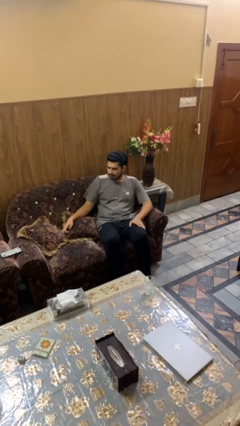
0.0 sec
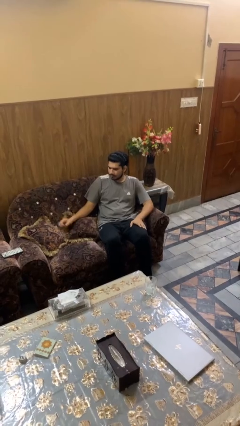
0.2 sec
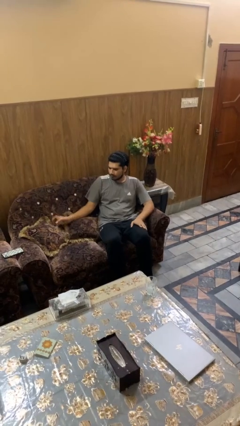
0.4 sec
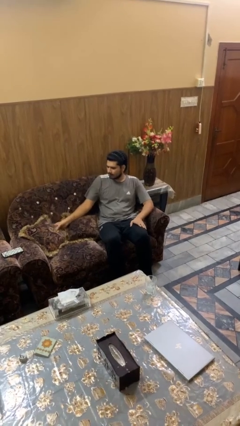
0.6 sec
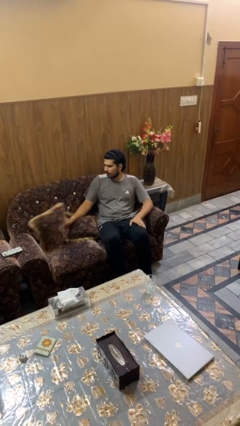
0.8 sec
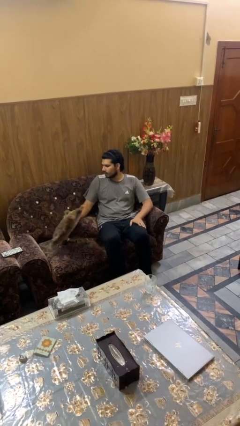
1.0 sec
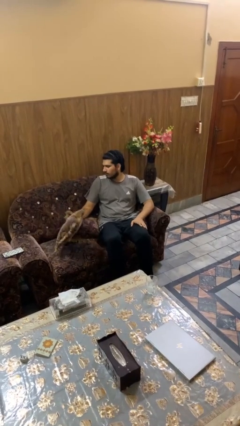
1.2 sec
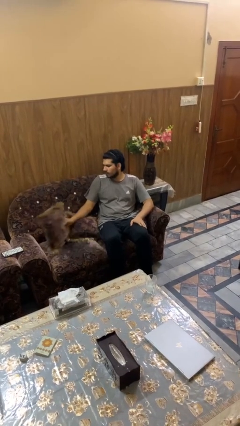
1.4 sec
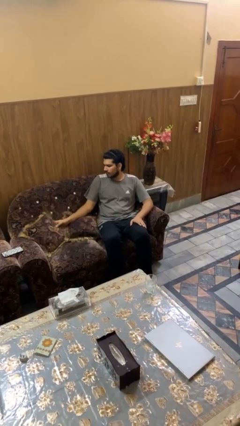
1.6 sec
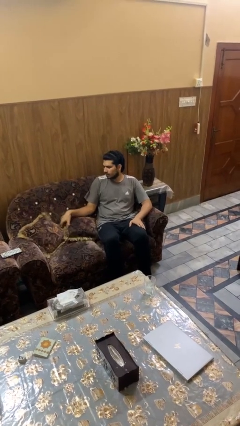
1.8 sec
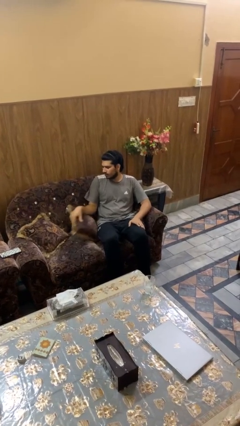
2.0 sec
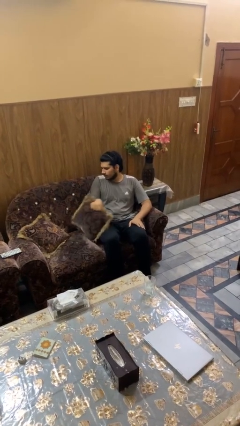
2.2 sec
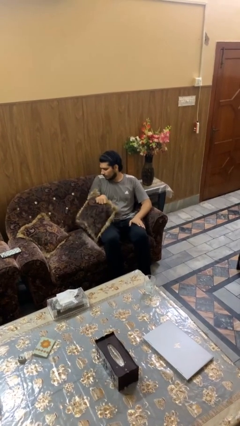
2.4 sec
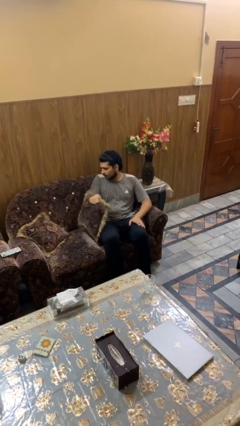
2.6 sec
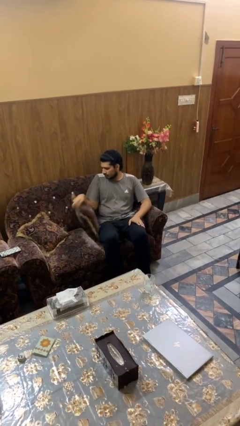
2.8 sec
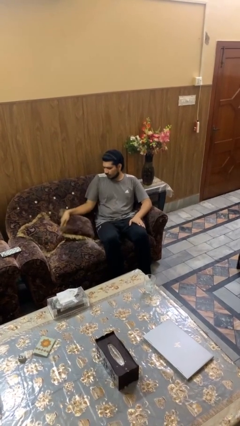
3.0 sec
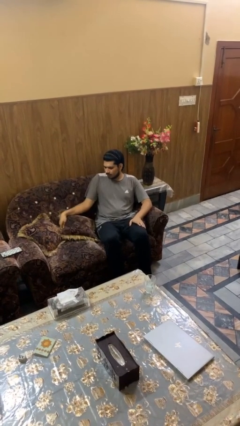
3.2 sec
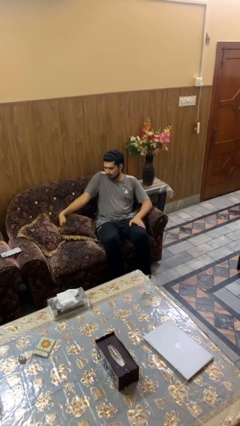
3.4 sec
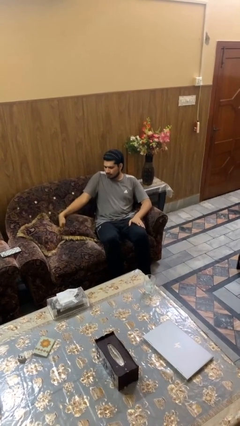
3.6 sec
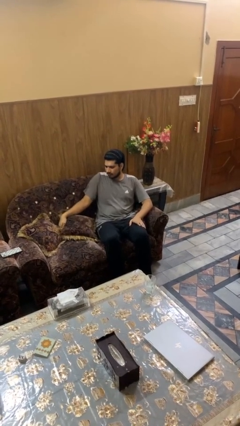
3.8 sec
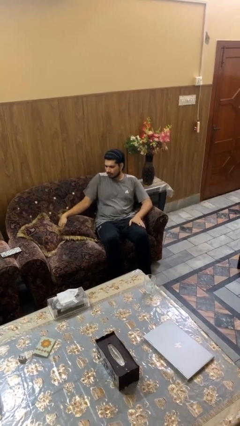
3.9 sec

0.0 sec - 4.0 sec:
person searches in couch

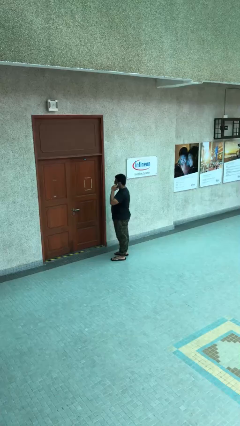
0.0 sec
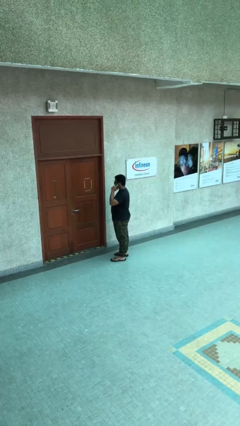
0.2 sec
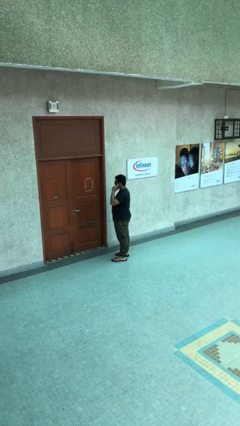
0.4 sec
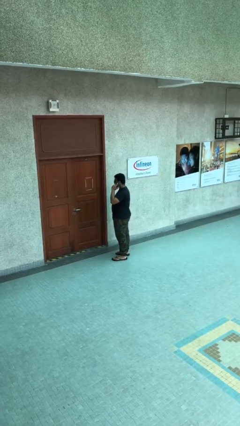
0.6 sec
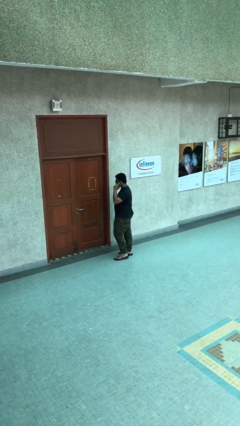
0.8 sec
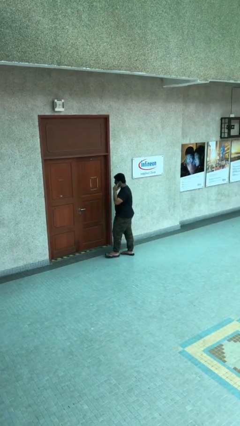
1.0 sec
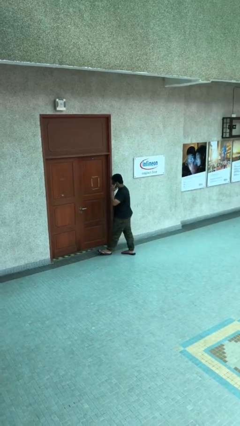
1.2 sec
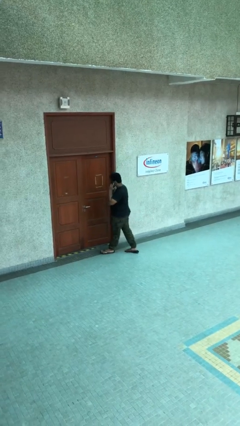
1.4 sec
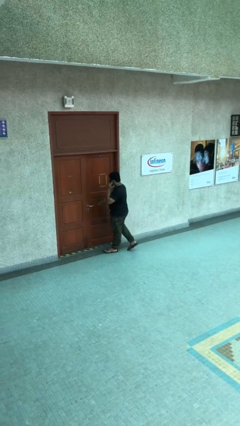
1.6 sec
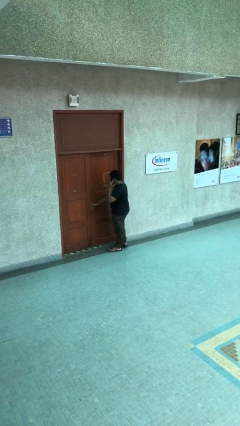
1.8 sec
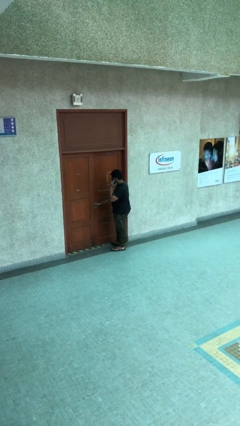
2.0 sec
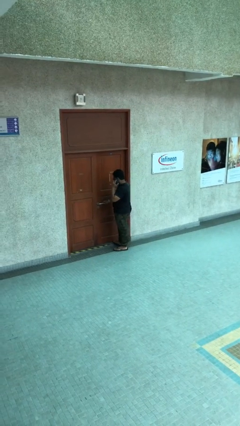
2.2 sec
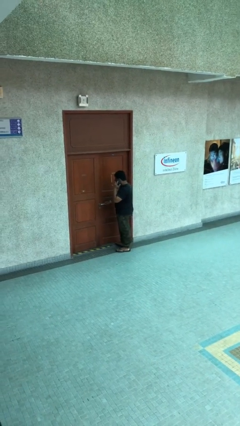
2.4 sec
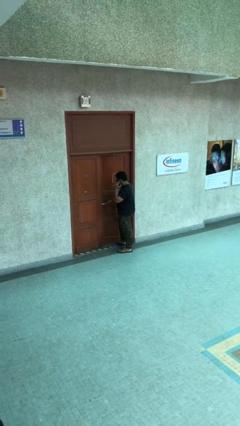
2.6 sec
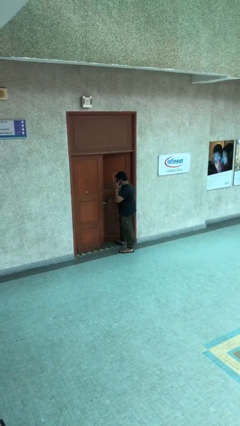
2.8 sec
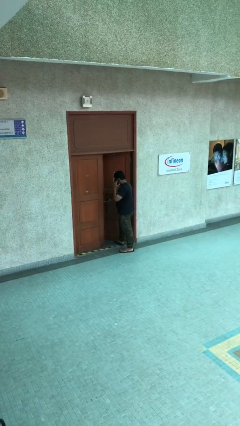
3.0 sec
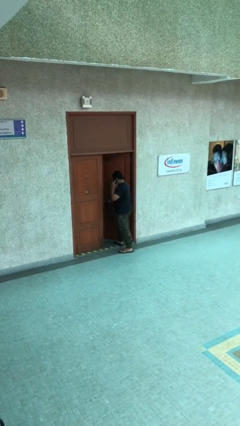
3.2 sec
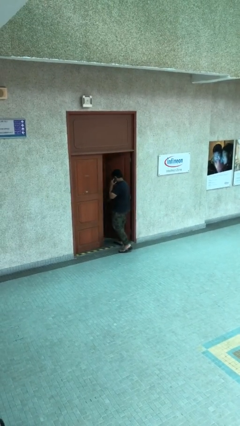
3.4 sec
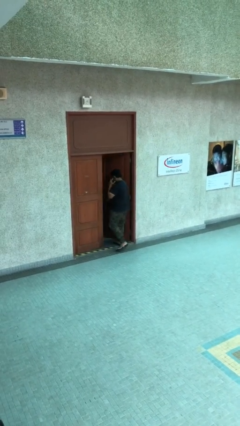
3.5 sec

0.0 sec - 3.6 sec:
person opens facility door

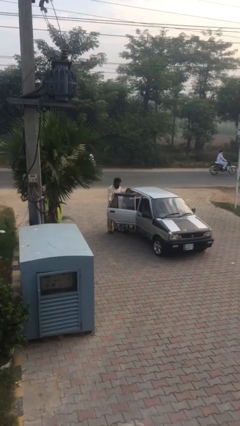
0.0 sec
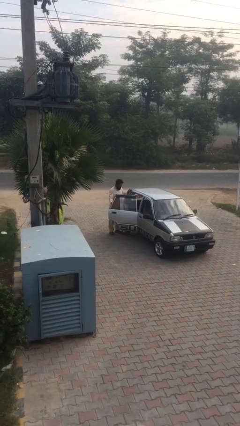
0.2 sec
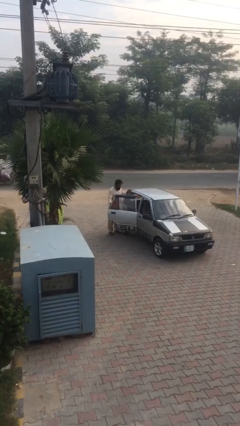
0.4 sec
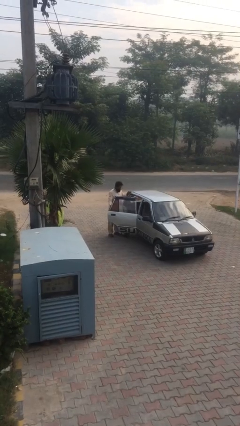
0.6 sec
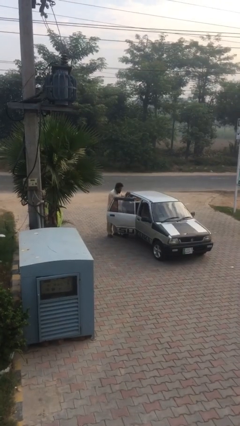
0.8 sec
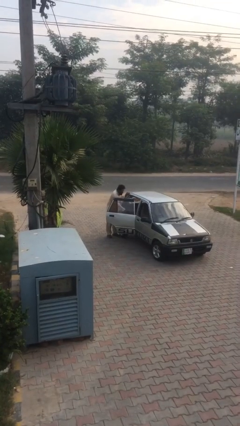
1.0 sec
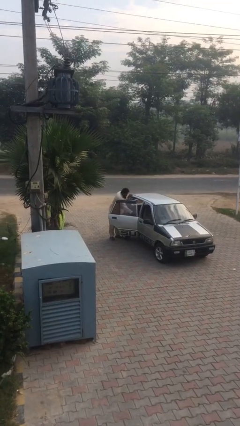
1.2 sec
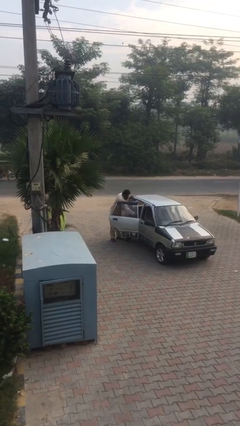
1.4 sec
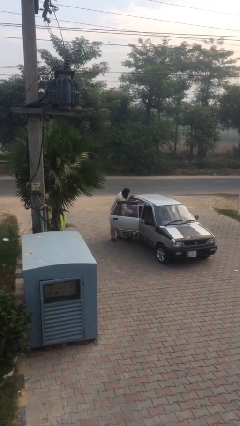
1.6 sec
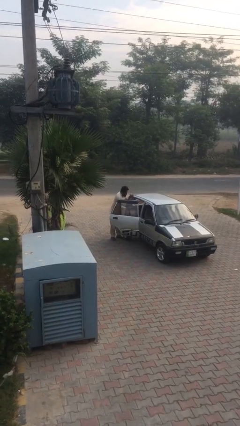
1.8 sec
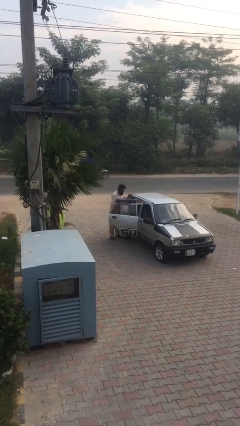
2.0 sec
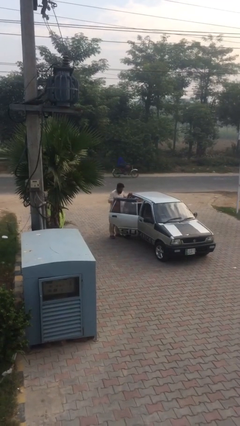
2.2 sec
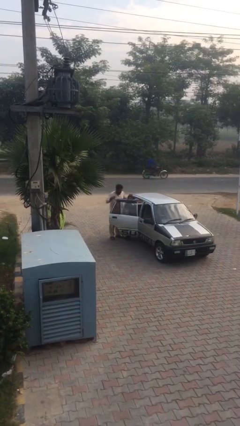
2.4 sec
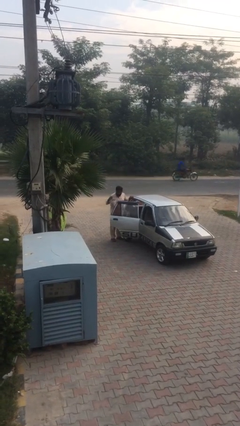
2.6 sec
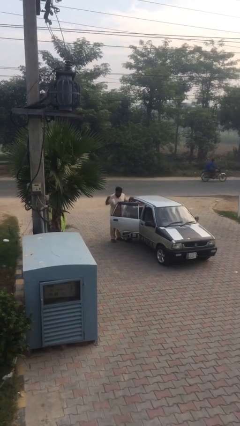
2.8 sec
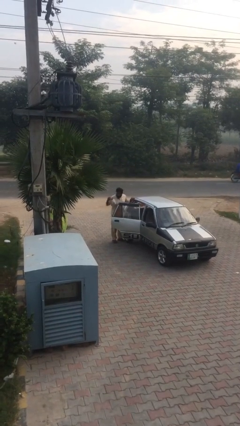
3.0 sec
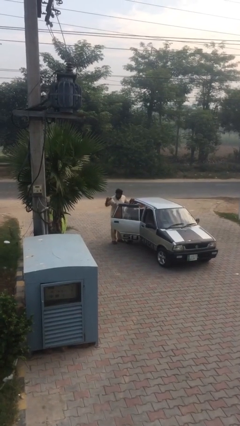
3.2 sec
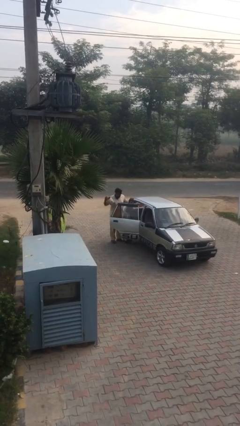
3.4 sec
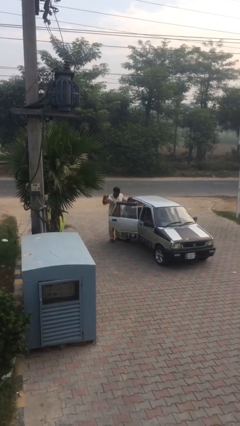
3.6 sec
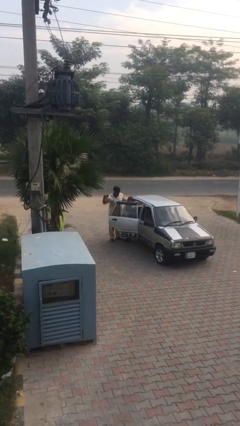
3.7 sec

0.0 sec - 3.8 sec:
person unloads car

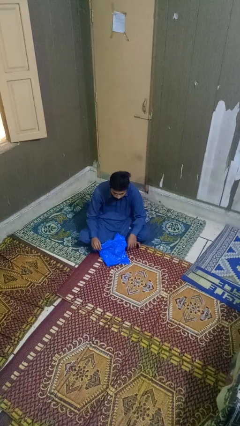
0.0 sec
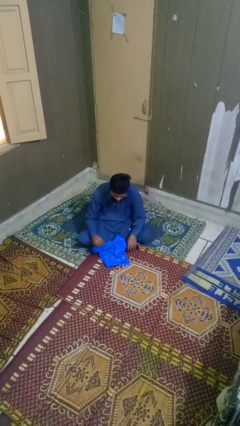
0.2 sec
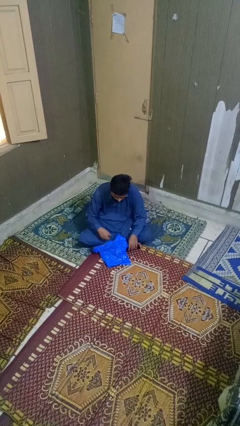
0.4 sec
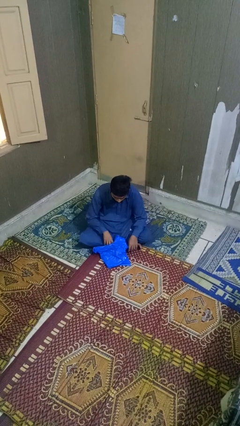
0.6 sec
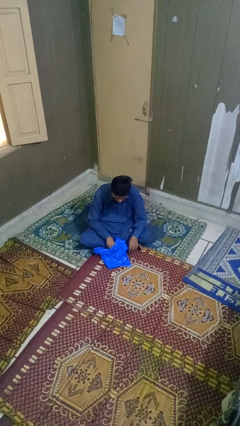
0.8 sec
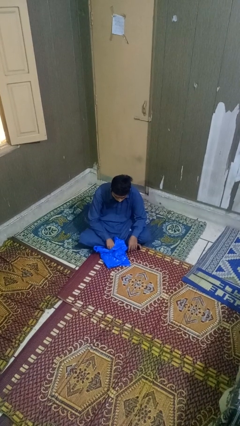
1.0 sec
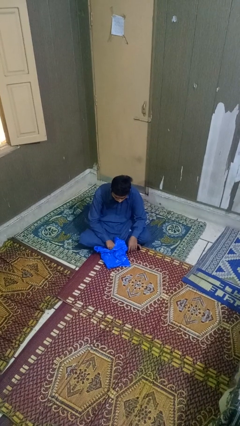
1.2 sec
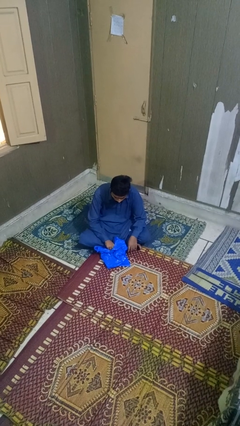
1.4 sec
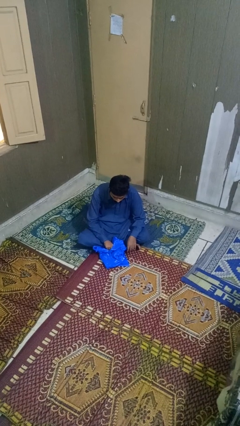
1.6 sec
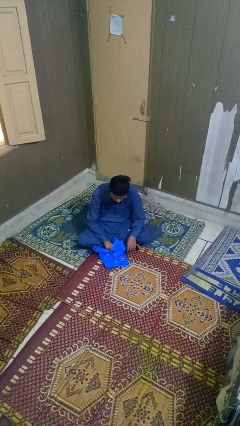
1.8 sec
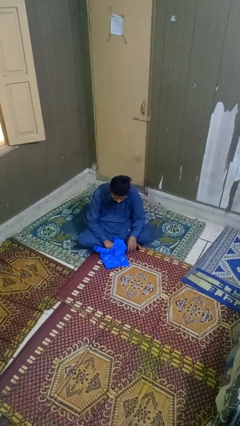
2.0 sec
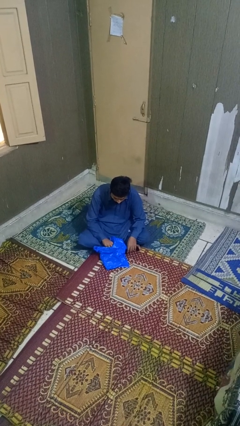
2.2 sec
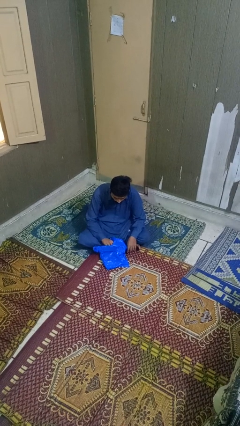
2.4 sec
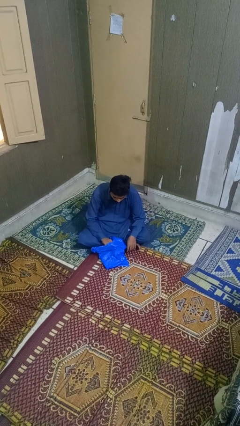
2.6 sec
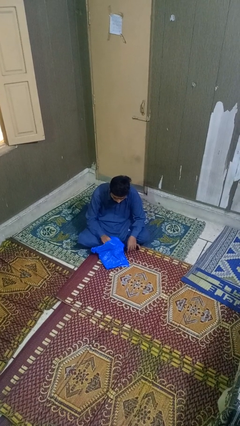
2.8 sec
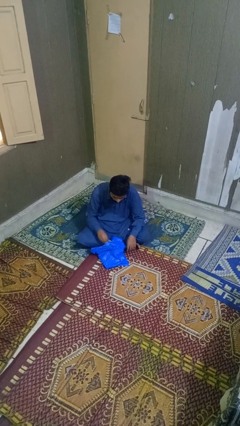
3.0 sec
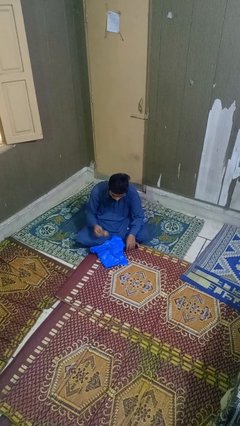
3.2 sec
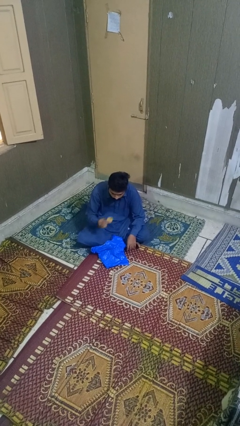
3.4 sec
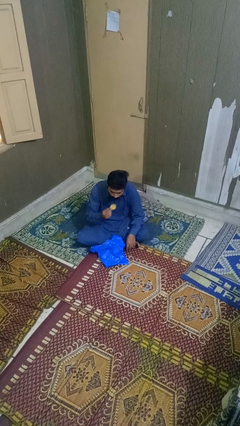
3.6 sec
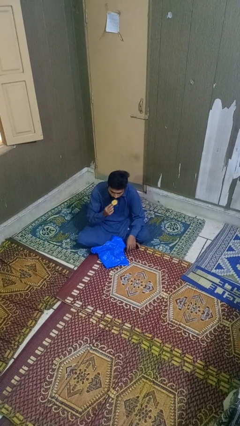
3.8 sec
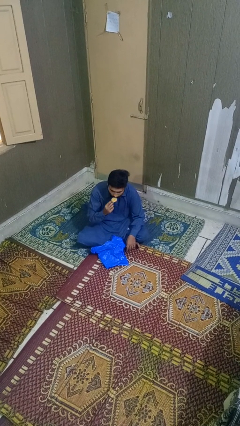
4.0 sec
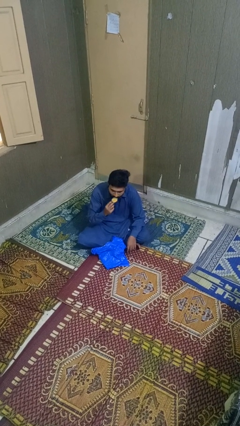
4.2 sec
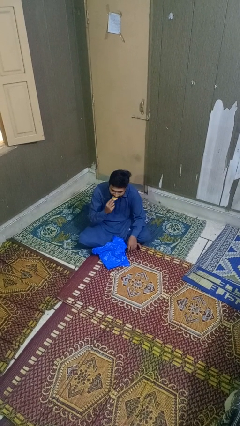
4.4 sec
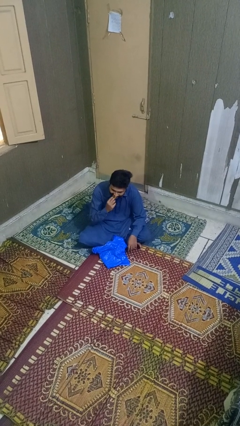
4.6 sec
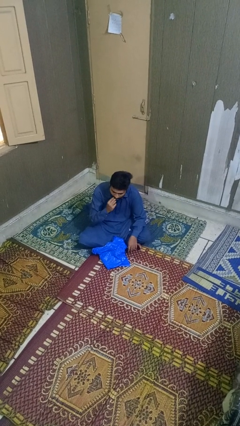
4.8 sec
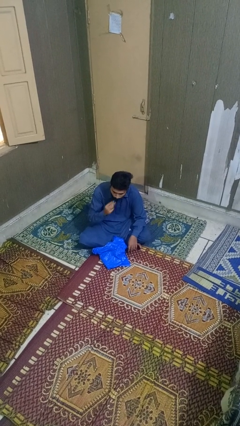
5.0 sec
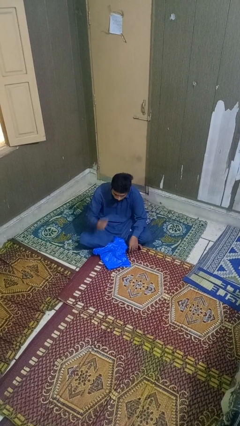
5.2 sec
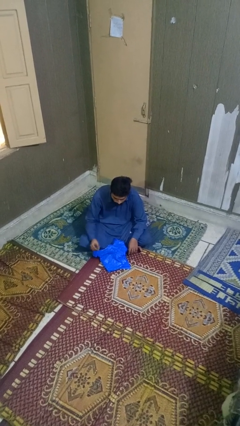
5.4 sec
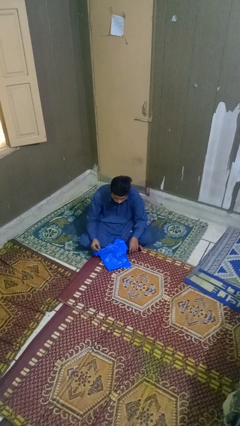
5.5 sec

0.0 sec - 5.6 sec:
person eats snack from bag

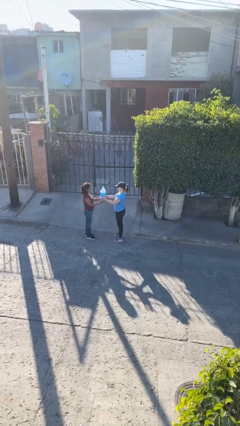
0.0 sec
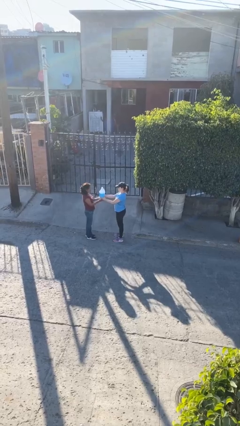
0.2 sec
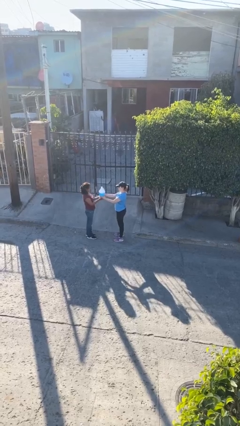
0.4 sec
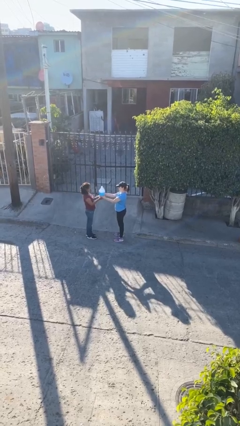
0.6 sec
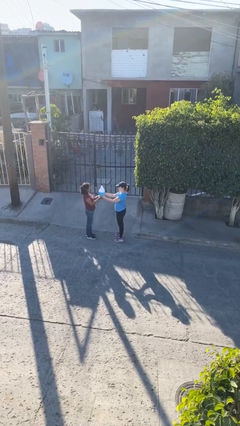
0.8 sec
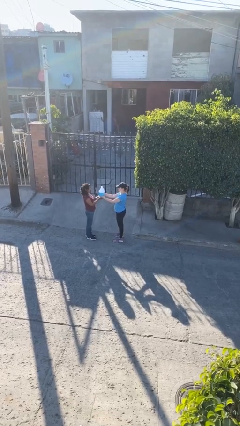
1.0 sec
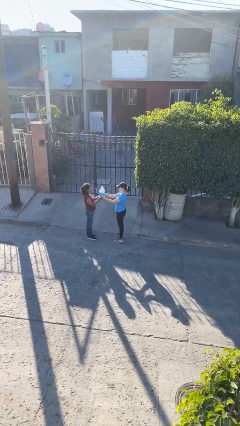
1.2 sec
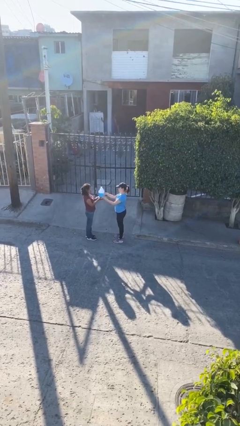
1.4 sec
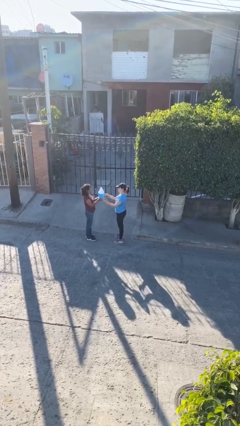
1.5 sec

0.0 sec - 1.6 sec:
person transfers object to person
